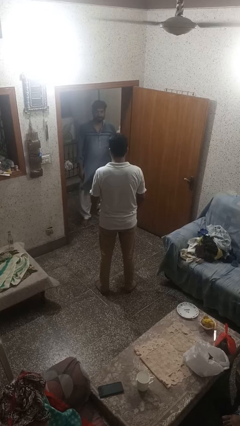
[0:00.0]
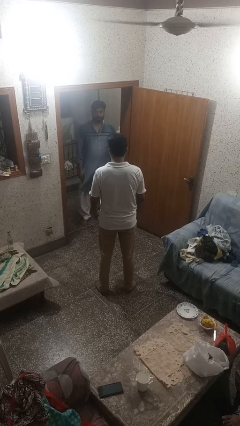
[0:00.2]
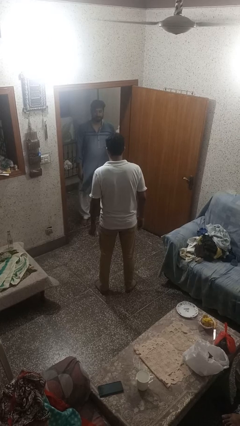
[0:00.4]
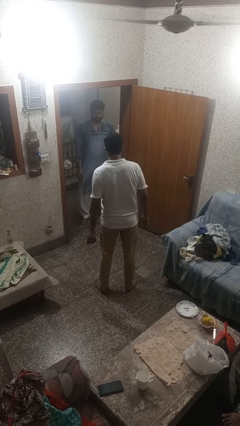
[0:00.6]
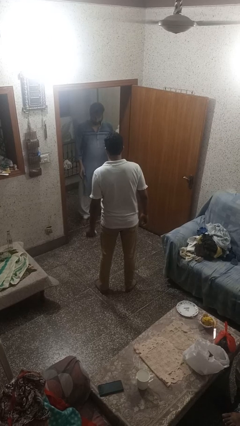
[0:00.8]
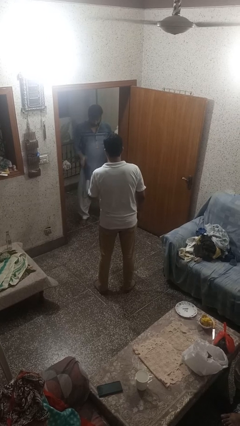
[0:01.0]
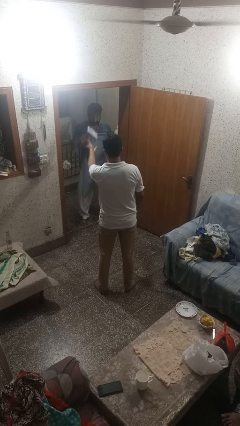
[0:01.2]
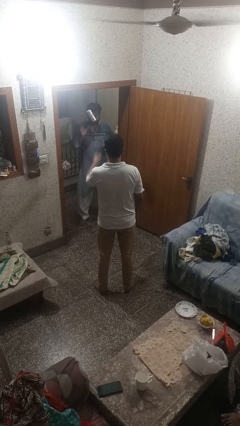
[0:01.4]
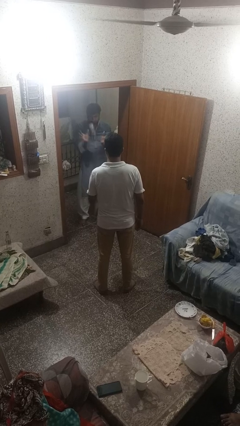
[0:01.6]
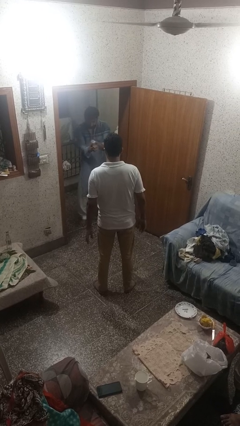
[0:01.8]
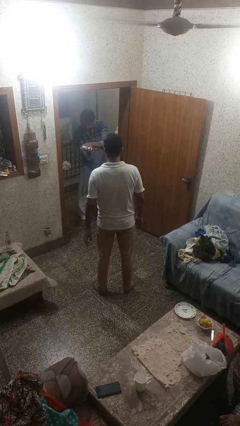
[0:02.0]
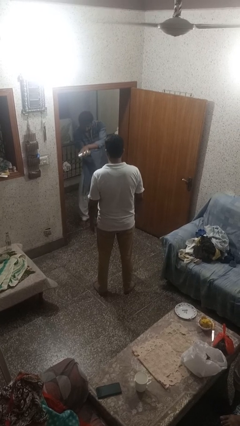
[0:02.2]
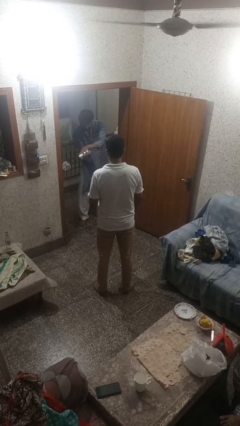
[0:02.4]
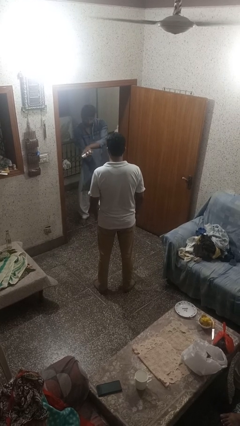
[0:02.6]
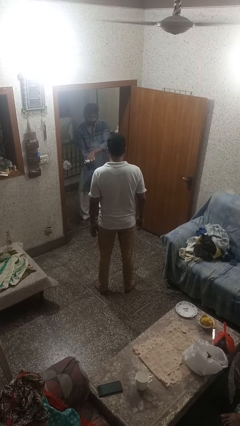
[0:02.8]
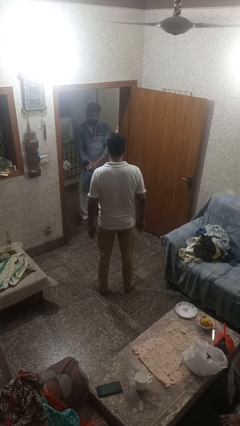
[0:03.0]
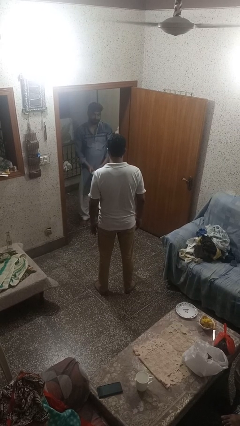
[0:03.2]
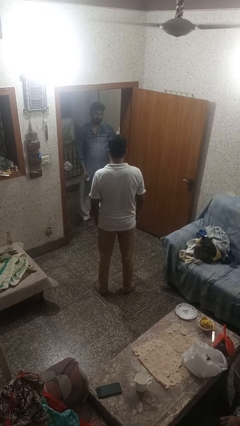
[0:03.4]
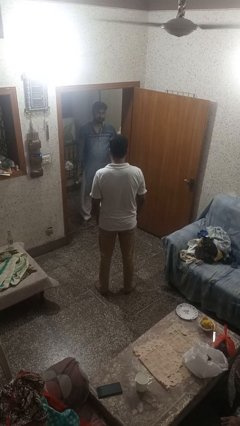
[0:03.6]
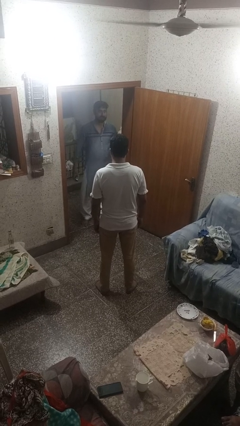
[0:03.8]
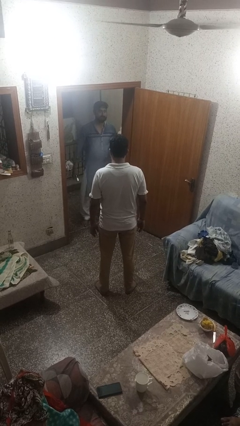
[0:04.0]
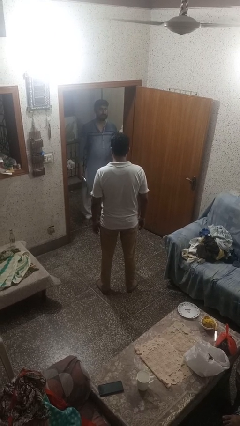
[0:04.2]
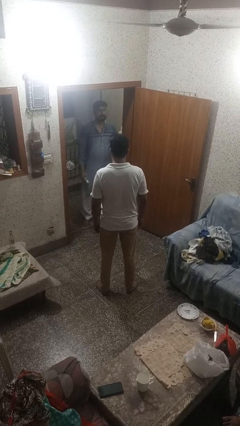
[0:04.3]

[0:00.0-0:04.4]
person throws object to person

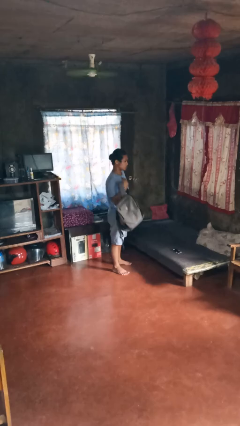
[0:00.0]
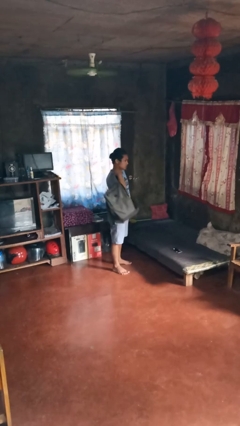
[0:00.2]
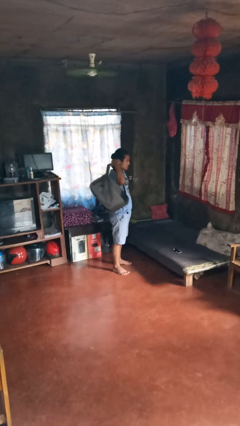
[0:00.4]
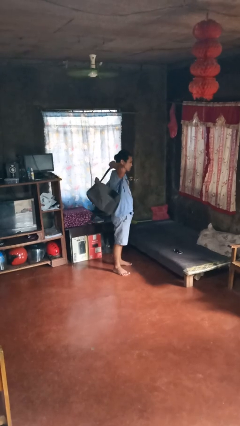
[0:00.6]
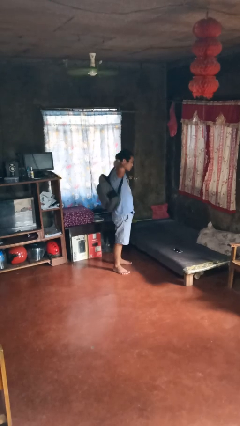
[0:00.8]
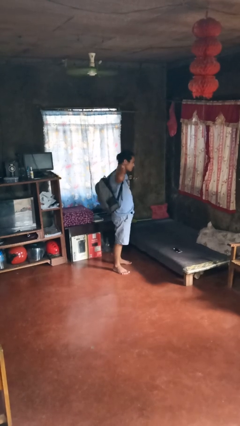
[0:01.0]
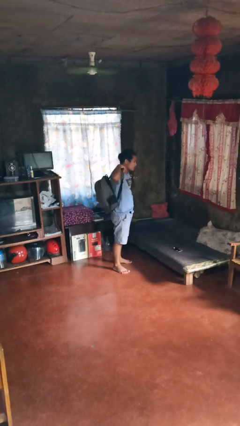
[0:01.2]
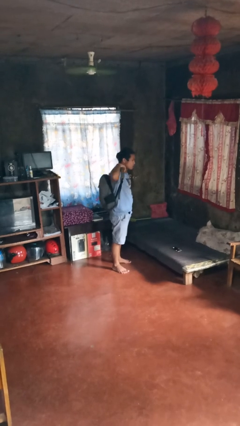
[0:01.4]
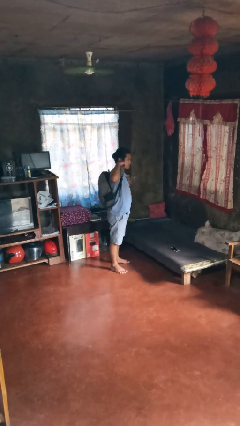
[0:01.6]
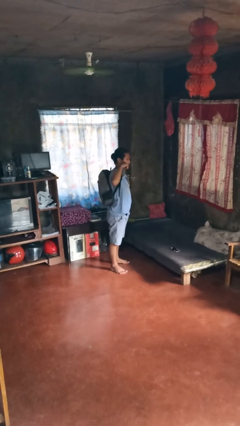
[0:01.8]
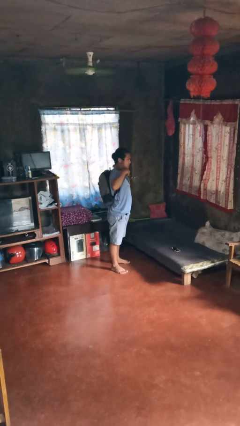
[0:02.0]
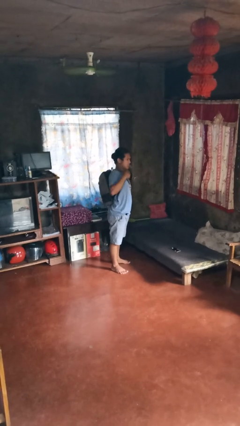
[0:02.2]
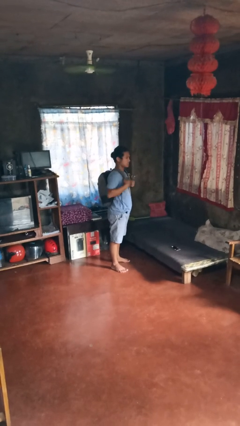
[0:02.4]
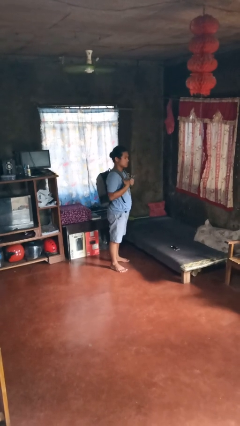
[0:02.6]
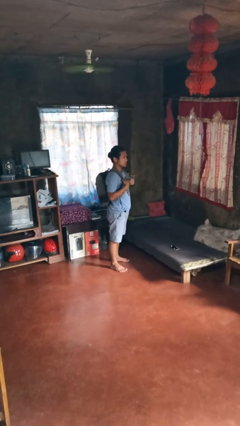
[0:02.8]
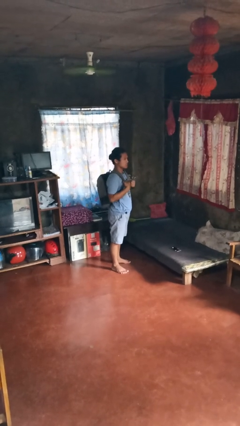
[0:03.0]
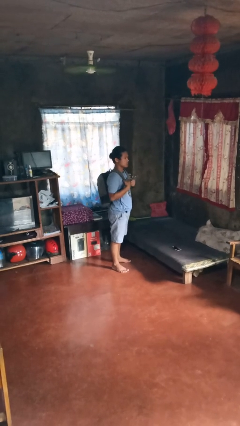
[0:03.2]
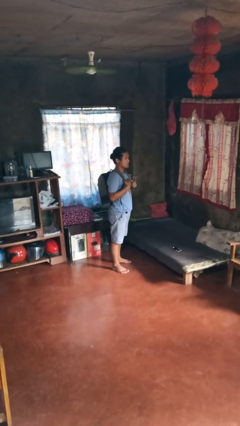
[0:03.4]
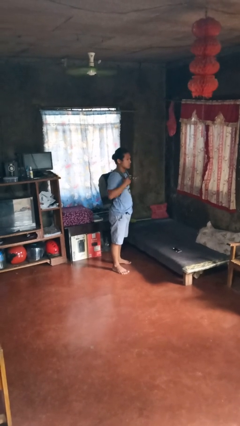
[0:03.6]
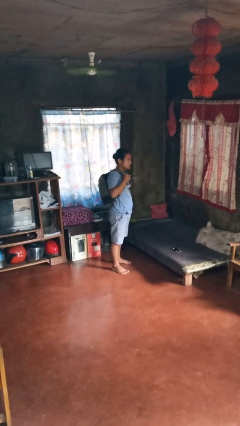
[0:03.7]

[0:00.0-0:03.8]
person puts on backpack

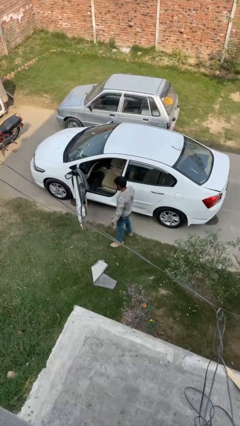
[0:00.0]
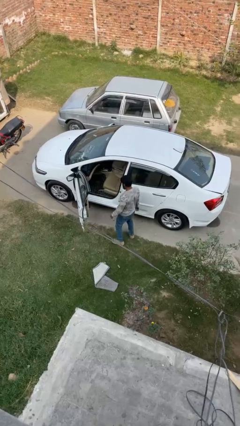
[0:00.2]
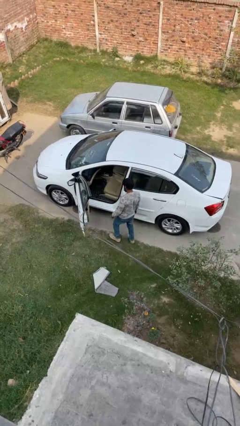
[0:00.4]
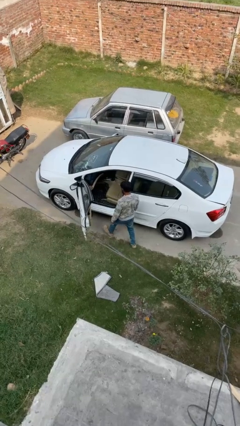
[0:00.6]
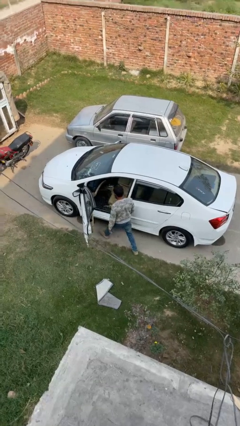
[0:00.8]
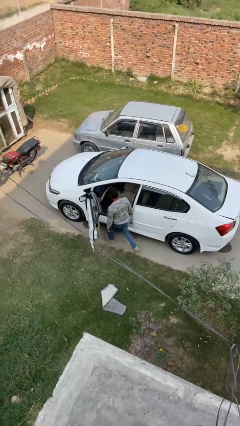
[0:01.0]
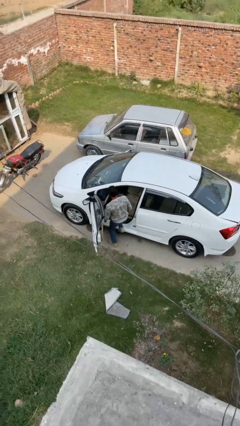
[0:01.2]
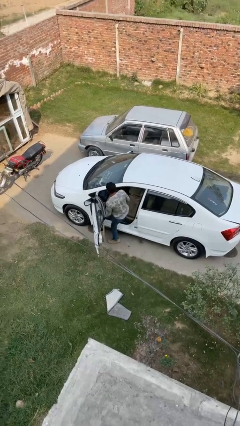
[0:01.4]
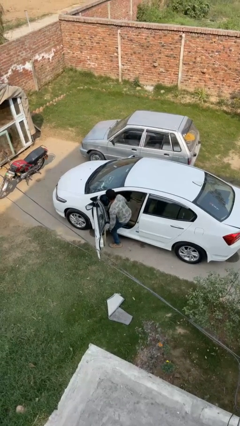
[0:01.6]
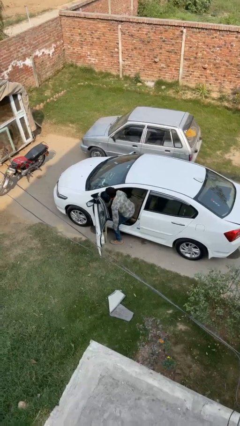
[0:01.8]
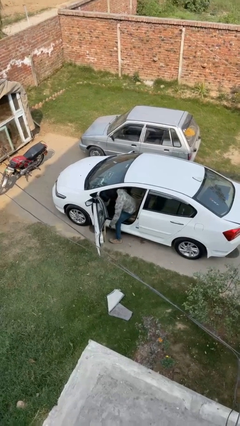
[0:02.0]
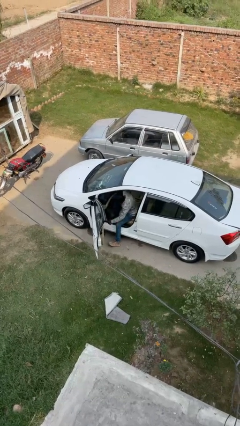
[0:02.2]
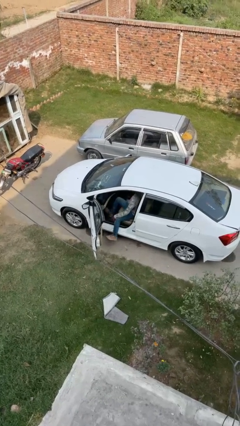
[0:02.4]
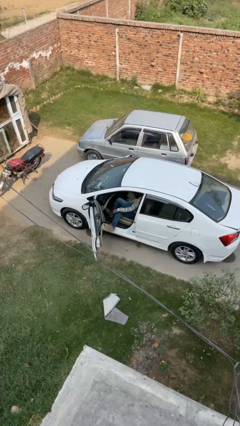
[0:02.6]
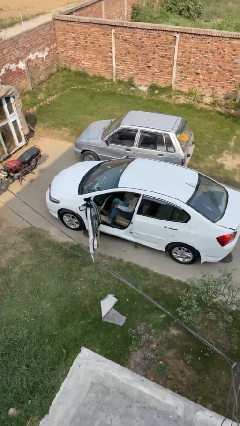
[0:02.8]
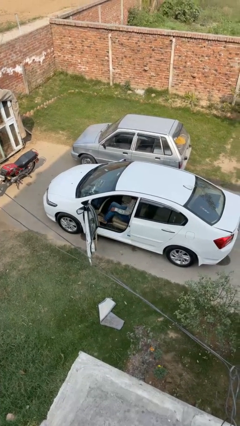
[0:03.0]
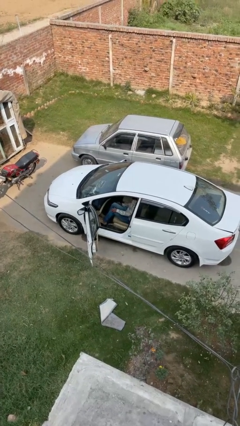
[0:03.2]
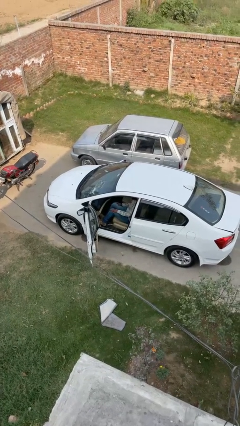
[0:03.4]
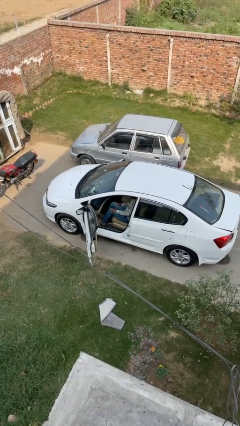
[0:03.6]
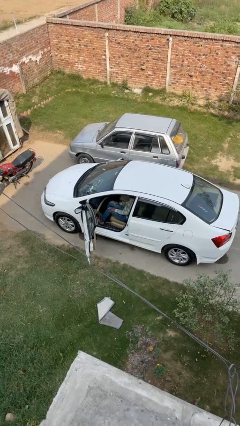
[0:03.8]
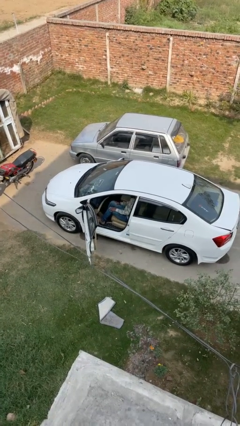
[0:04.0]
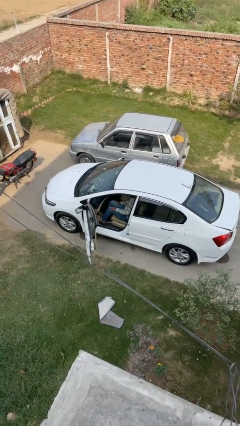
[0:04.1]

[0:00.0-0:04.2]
person enters car

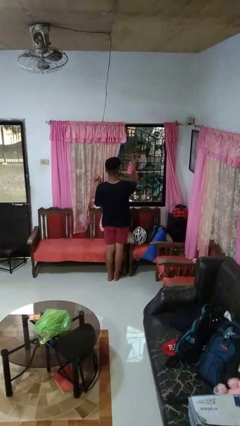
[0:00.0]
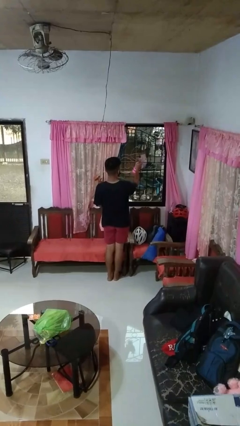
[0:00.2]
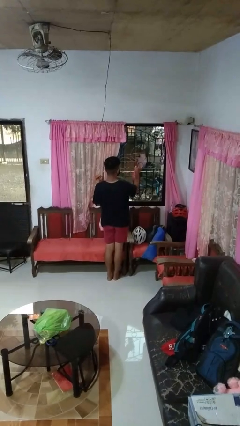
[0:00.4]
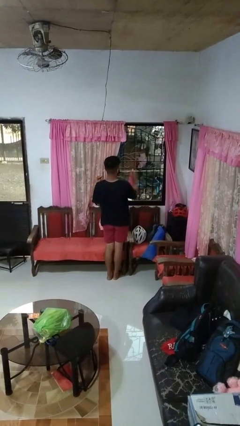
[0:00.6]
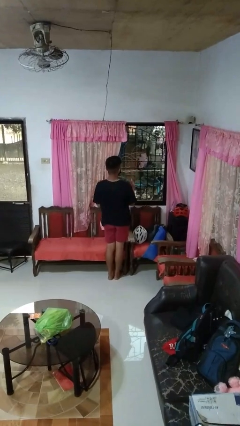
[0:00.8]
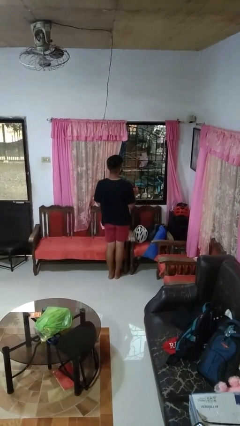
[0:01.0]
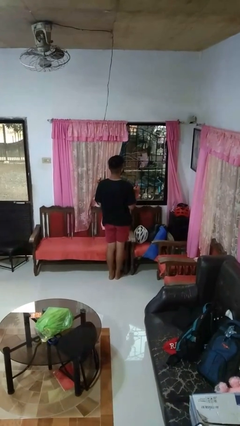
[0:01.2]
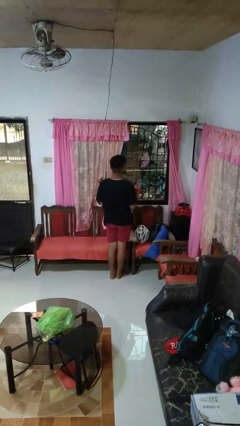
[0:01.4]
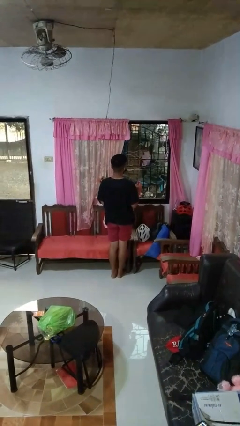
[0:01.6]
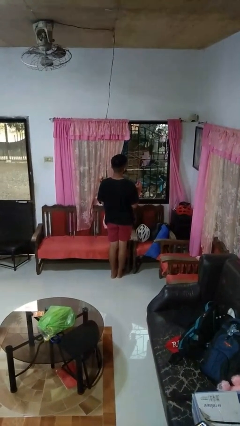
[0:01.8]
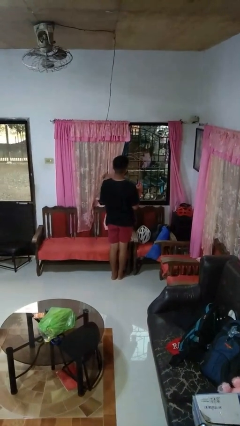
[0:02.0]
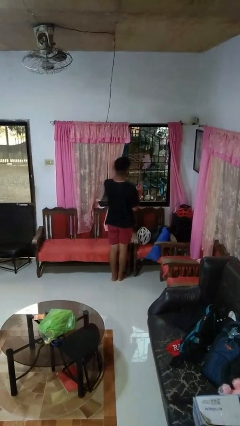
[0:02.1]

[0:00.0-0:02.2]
person sprays from bottle

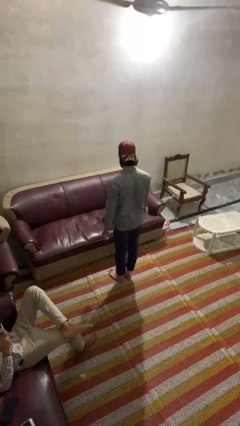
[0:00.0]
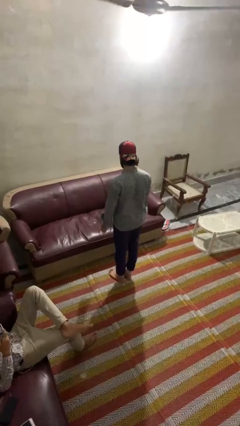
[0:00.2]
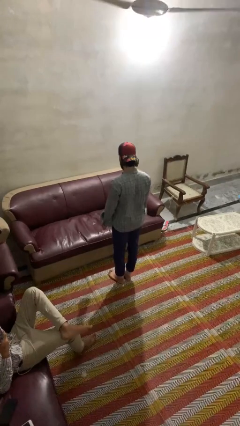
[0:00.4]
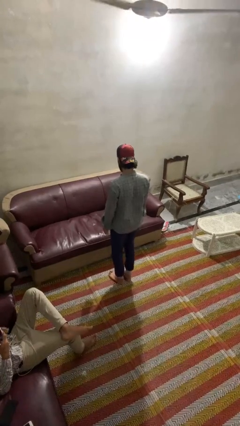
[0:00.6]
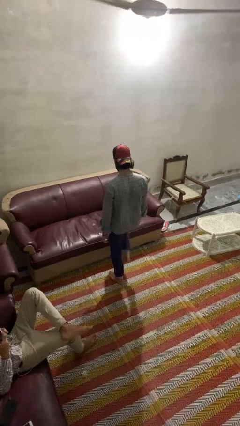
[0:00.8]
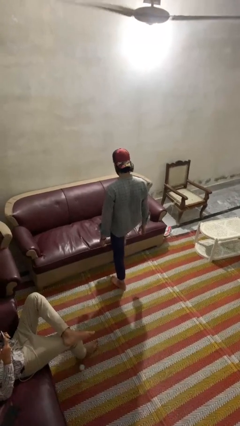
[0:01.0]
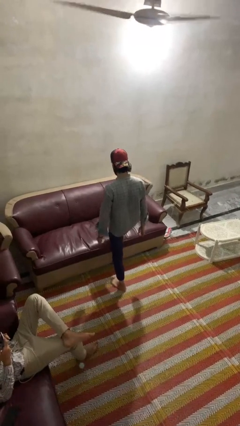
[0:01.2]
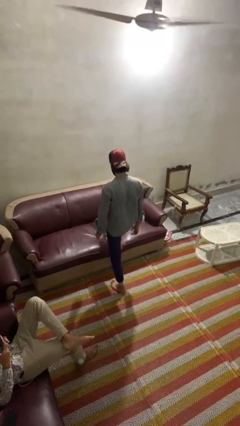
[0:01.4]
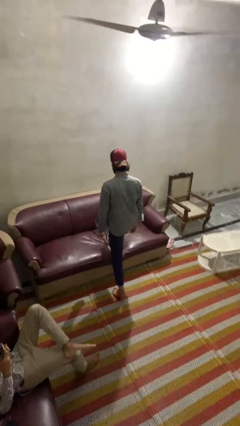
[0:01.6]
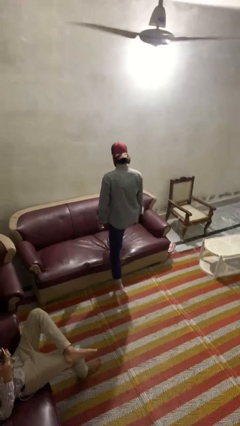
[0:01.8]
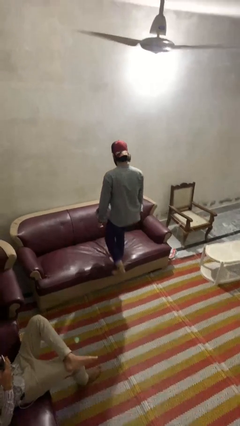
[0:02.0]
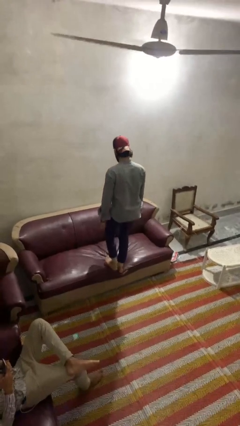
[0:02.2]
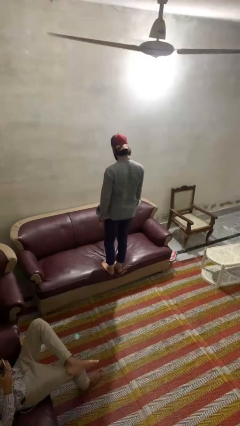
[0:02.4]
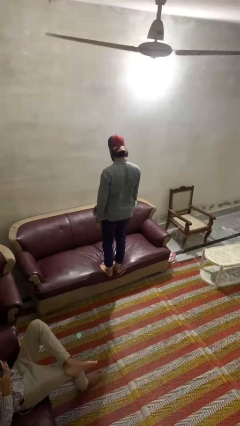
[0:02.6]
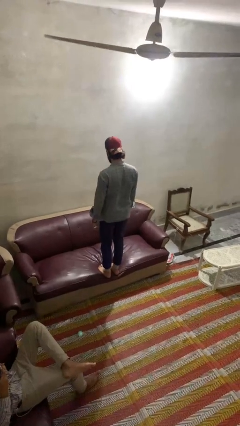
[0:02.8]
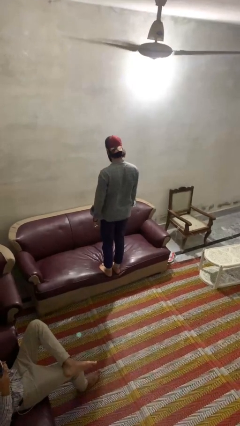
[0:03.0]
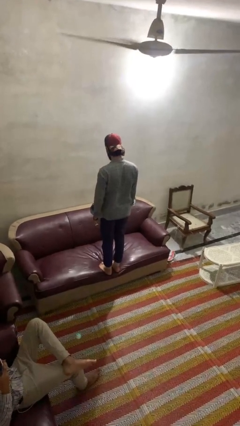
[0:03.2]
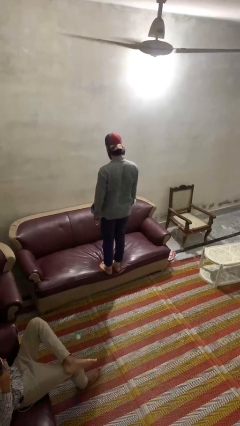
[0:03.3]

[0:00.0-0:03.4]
person climbs on couch
